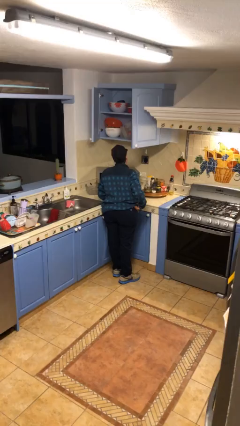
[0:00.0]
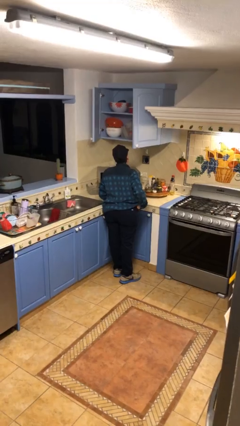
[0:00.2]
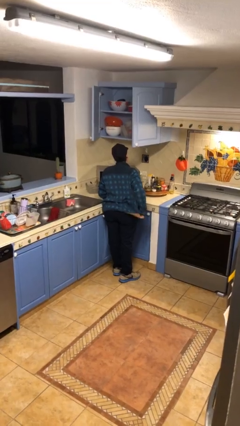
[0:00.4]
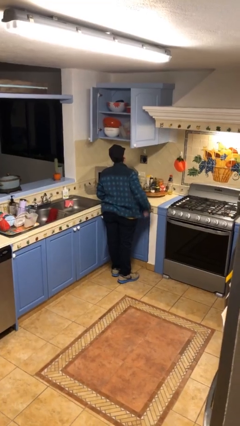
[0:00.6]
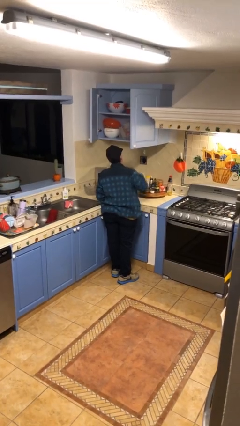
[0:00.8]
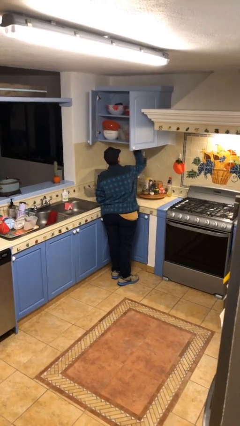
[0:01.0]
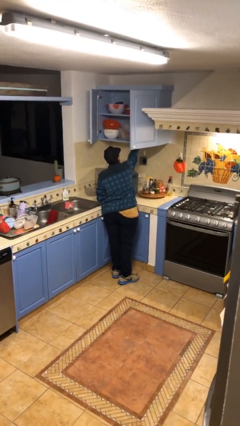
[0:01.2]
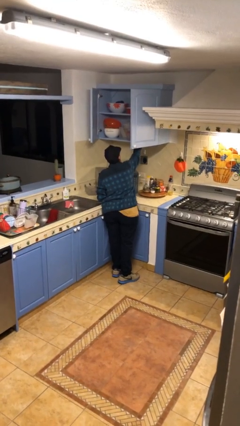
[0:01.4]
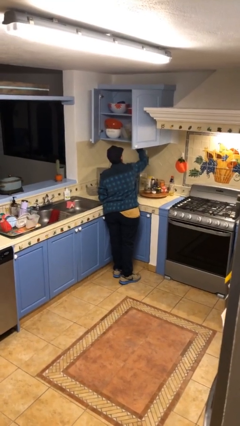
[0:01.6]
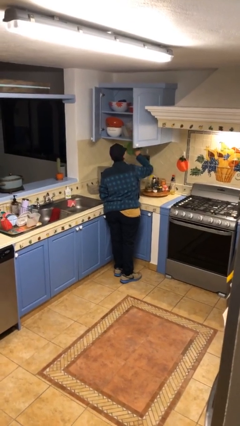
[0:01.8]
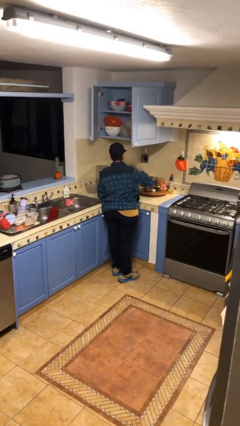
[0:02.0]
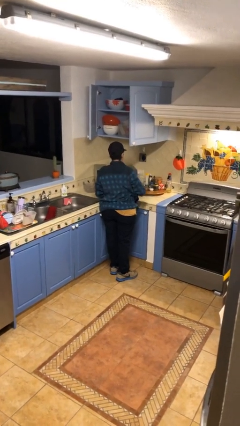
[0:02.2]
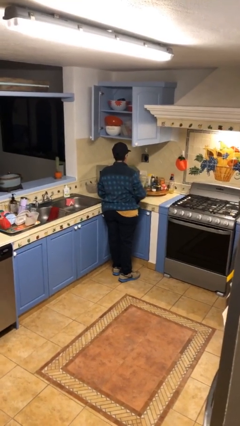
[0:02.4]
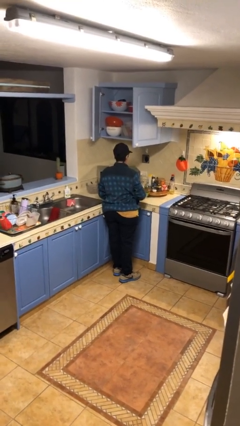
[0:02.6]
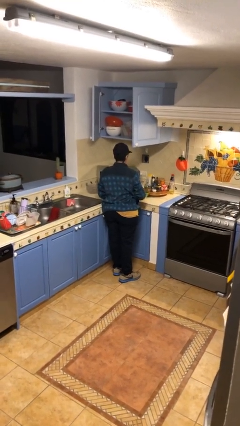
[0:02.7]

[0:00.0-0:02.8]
person takes object from cabinet

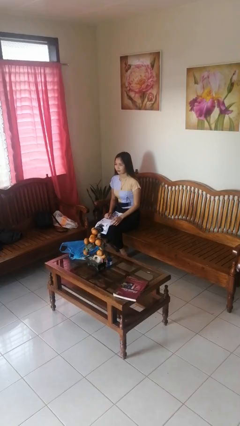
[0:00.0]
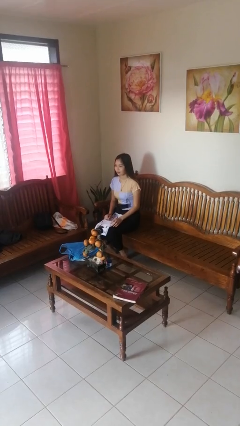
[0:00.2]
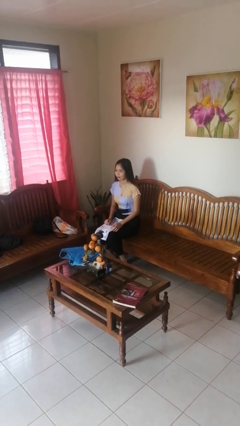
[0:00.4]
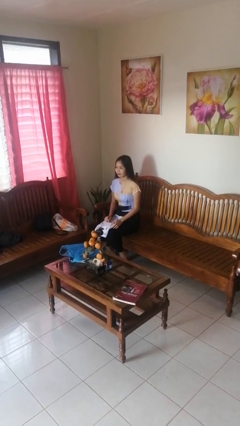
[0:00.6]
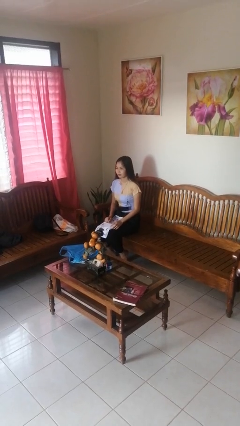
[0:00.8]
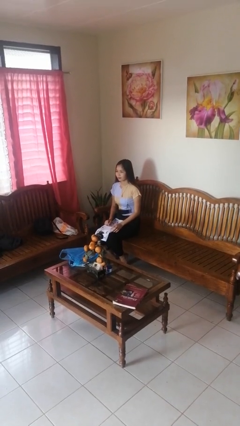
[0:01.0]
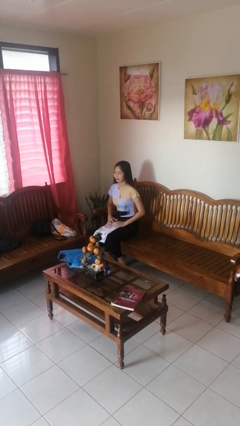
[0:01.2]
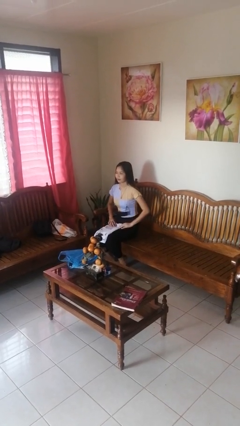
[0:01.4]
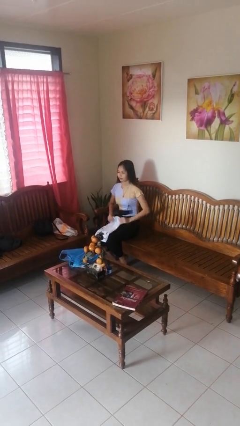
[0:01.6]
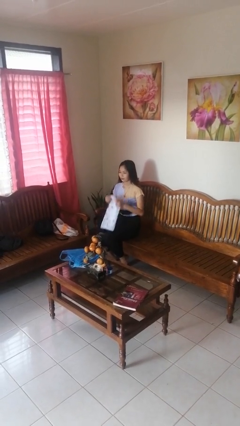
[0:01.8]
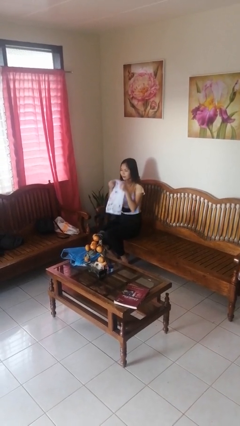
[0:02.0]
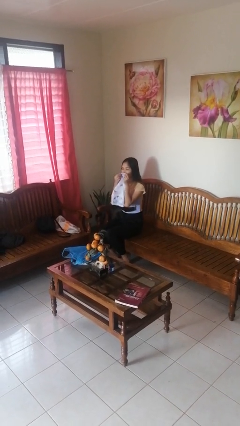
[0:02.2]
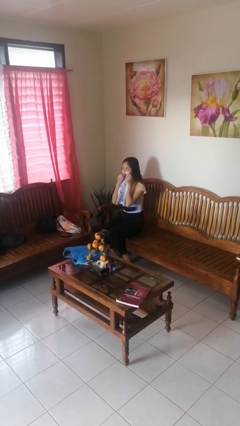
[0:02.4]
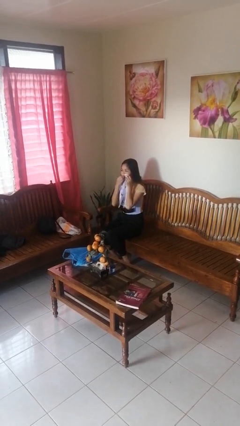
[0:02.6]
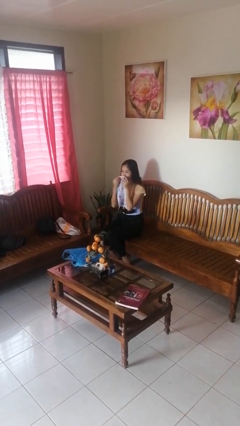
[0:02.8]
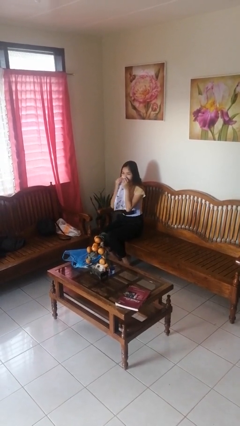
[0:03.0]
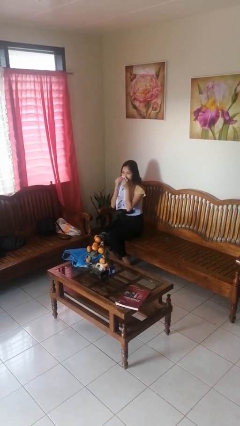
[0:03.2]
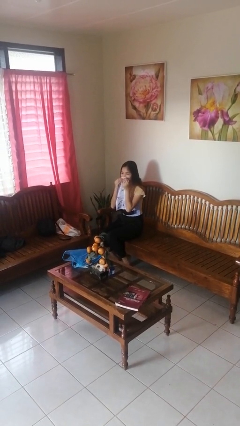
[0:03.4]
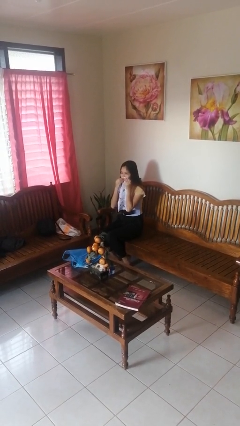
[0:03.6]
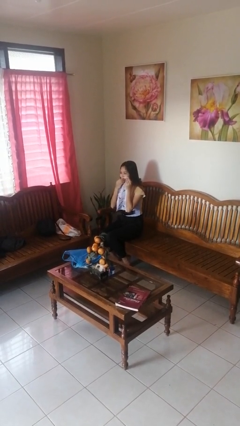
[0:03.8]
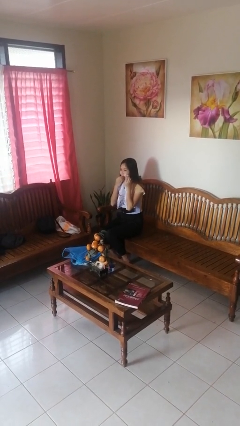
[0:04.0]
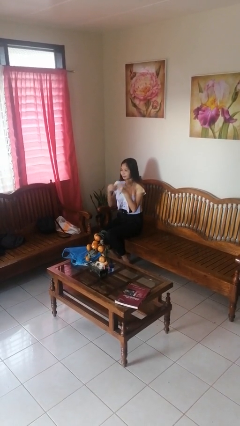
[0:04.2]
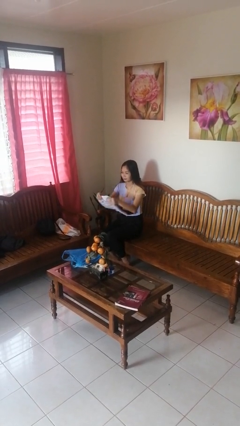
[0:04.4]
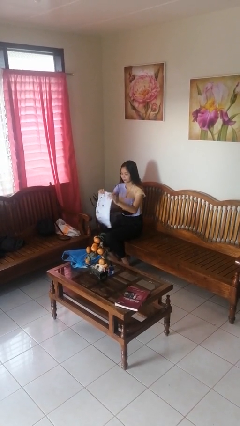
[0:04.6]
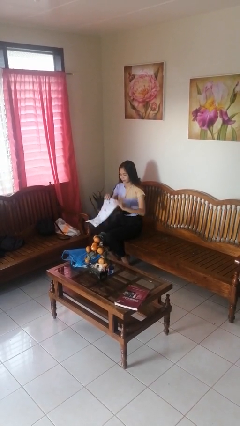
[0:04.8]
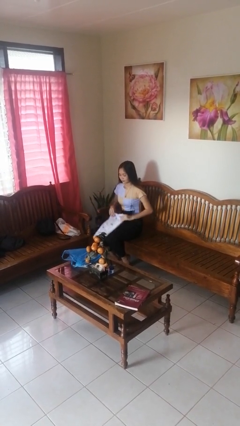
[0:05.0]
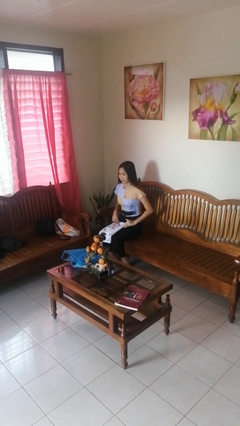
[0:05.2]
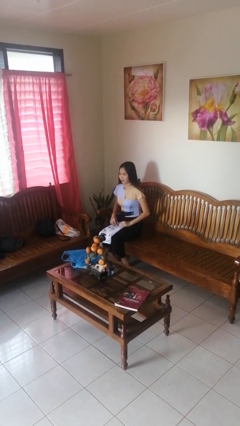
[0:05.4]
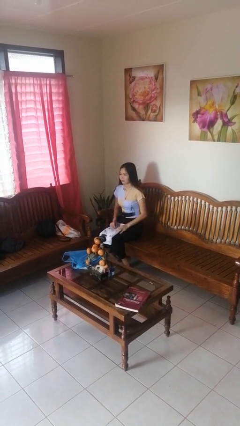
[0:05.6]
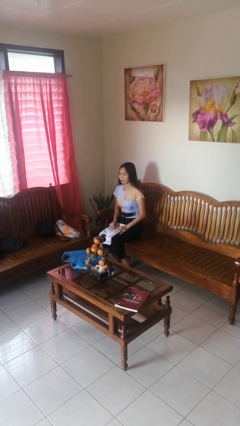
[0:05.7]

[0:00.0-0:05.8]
person wipes mouth with napkin

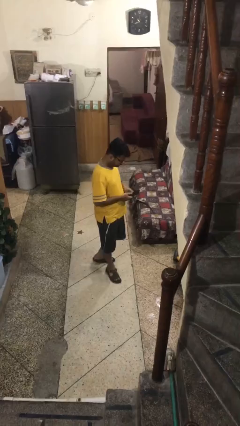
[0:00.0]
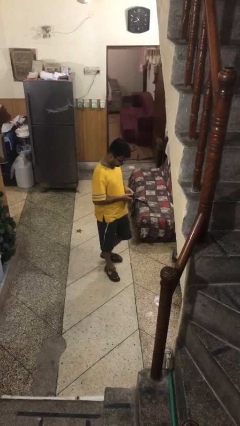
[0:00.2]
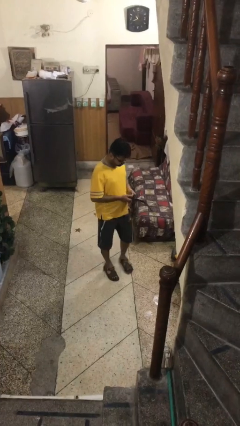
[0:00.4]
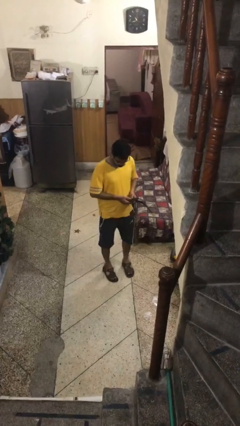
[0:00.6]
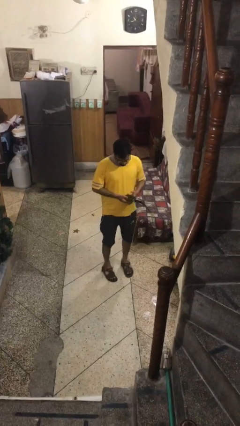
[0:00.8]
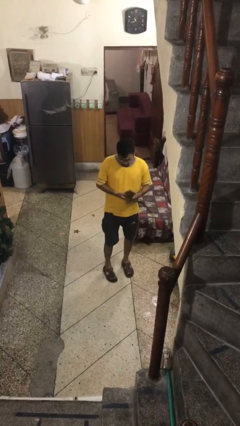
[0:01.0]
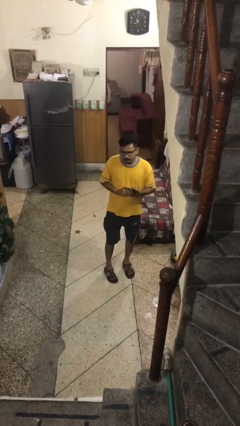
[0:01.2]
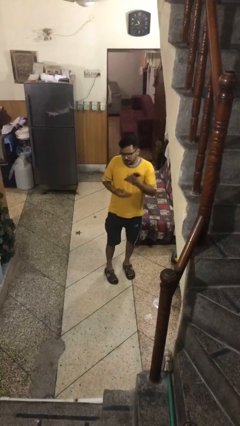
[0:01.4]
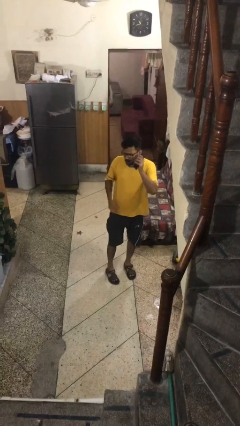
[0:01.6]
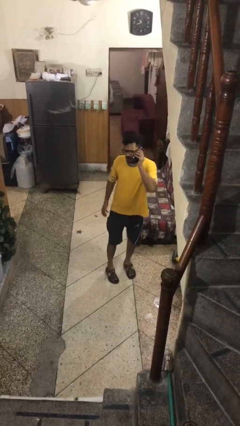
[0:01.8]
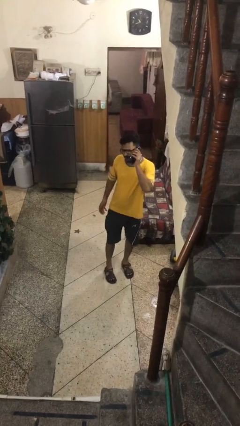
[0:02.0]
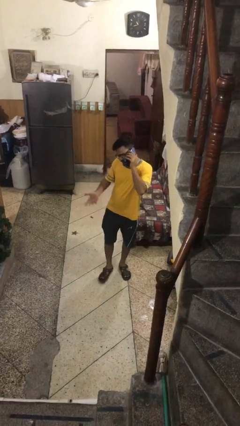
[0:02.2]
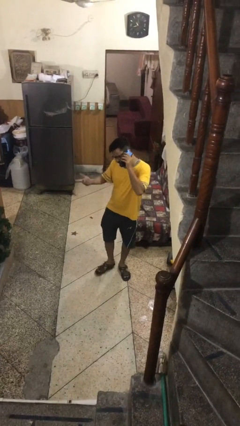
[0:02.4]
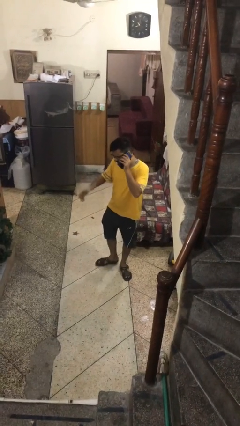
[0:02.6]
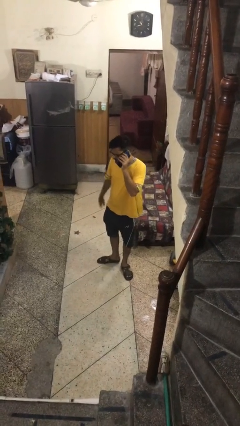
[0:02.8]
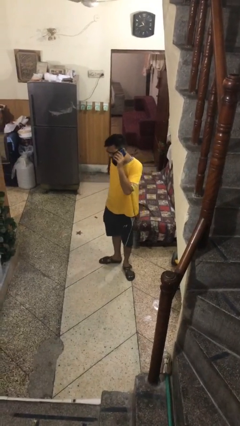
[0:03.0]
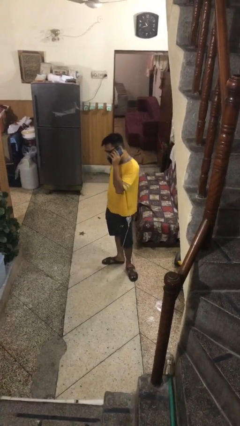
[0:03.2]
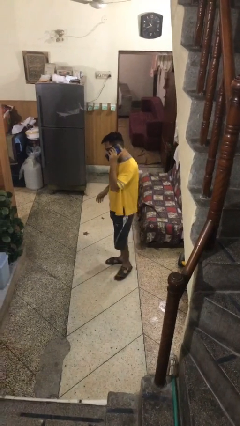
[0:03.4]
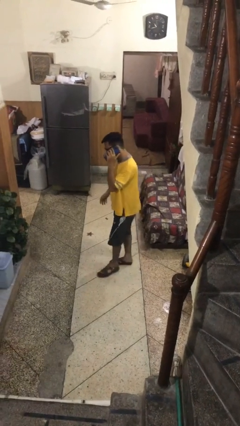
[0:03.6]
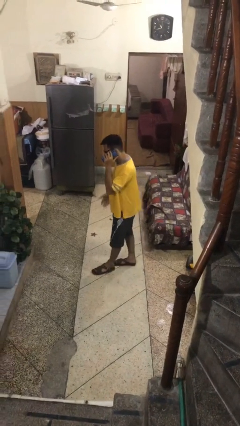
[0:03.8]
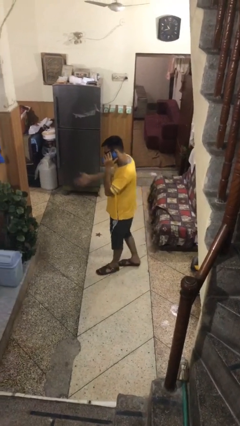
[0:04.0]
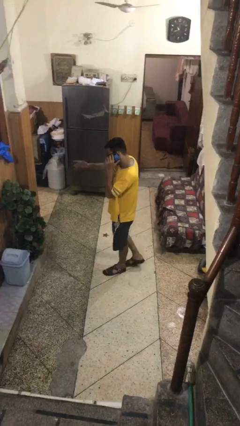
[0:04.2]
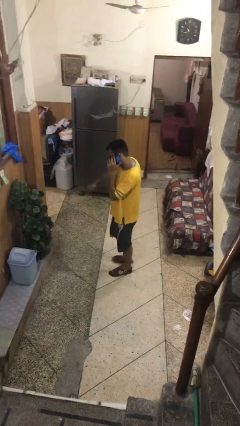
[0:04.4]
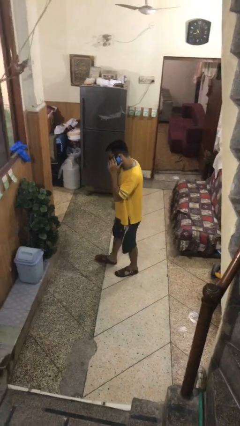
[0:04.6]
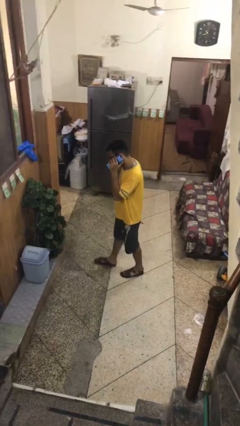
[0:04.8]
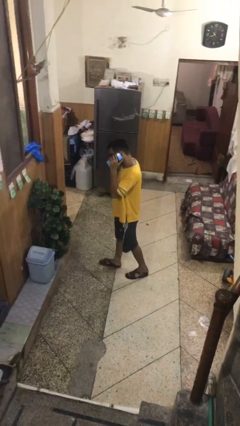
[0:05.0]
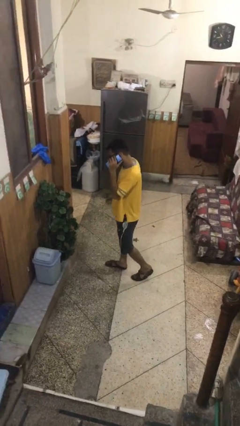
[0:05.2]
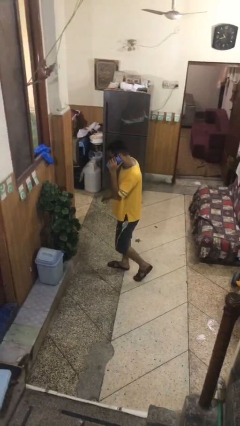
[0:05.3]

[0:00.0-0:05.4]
person talks on phone

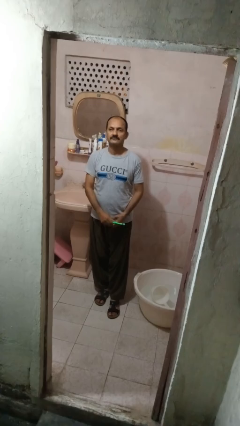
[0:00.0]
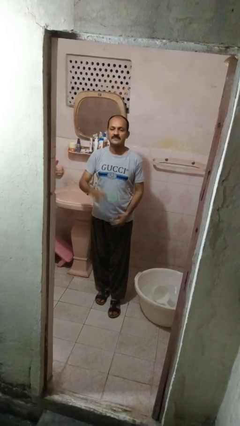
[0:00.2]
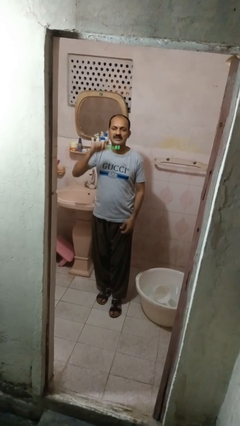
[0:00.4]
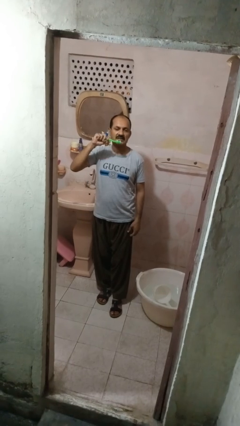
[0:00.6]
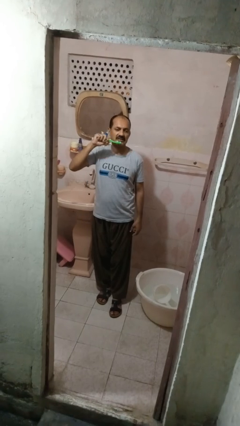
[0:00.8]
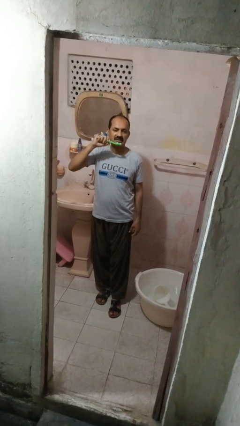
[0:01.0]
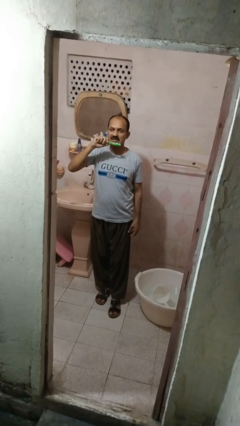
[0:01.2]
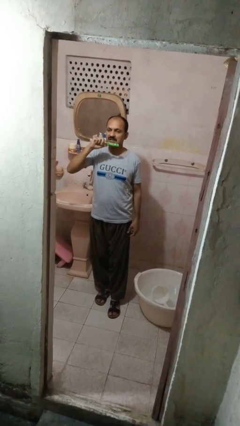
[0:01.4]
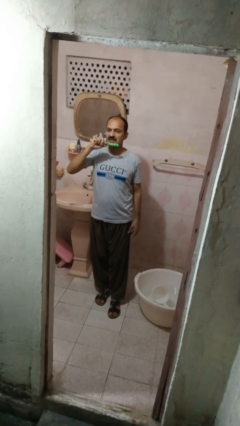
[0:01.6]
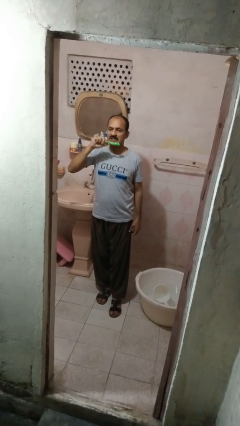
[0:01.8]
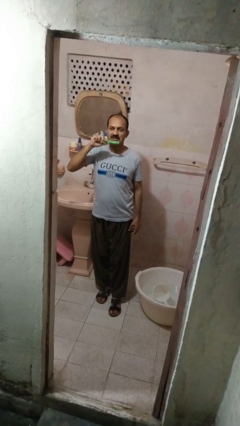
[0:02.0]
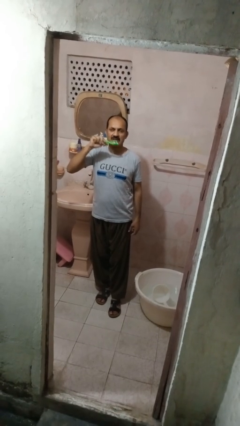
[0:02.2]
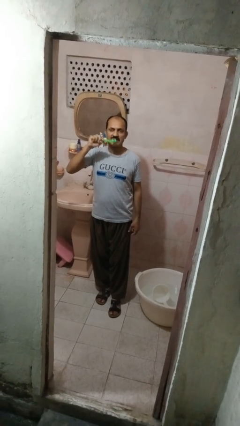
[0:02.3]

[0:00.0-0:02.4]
person brushes teeth

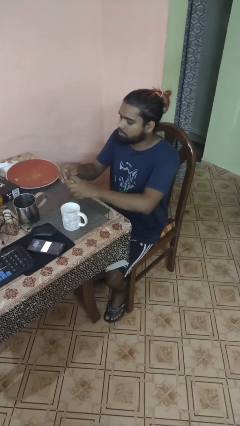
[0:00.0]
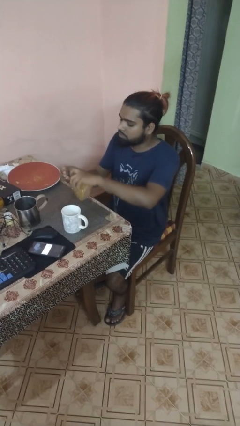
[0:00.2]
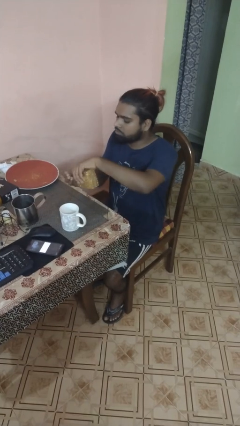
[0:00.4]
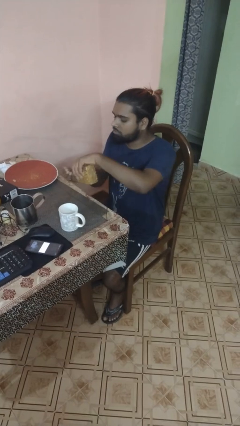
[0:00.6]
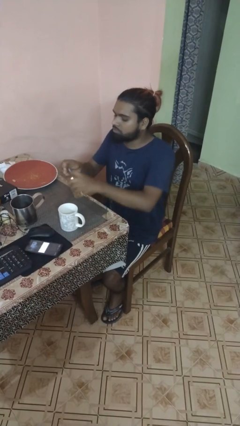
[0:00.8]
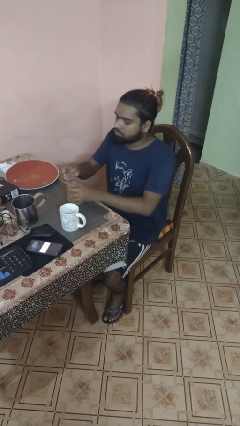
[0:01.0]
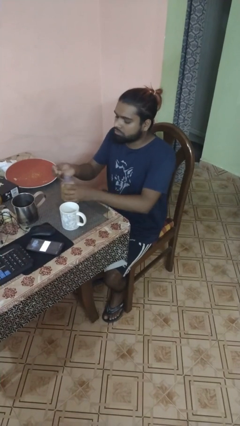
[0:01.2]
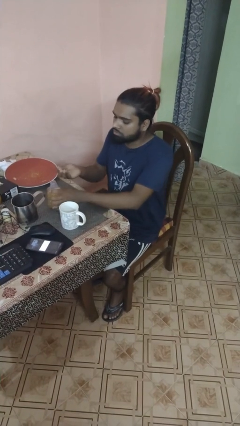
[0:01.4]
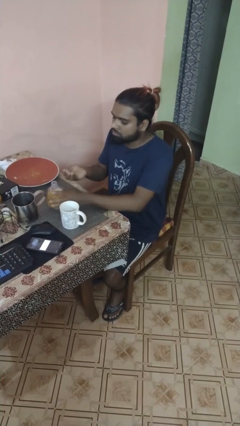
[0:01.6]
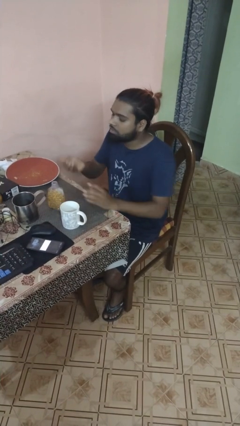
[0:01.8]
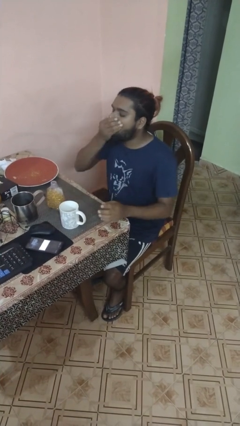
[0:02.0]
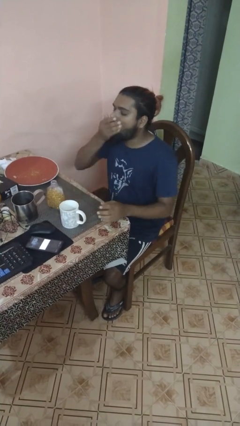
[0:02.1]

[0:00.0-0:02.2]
person takes medicine pills
